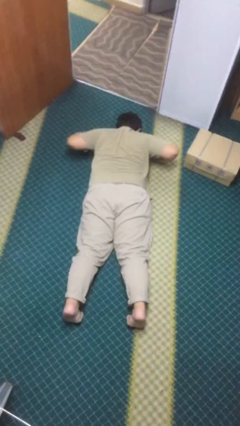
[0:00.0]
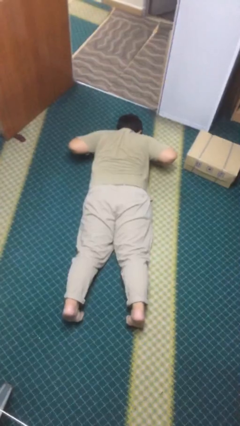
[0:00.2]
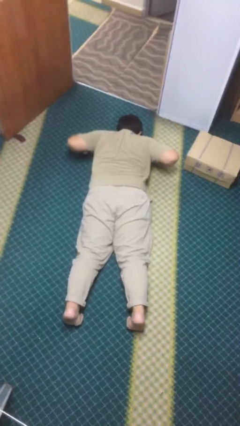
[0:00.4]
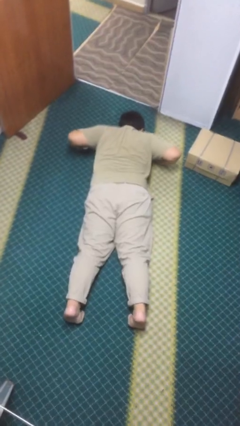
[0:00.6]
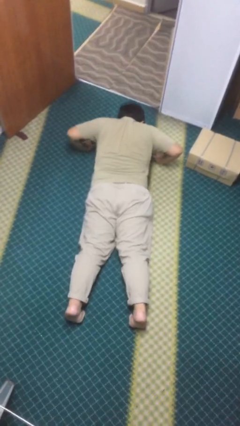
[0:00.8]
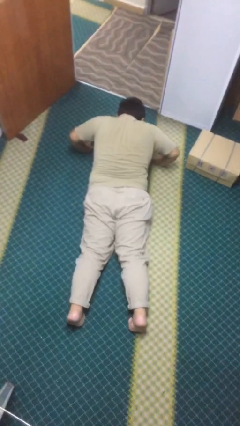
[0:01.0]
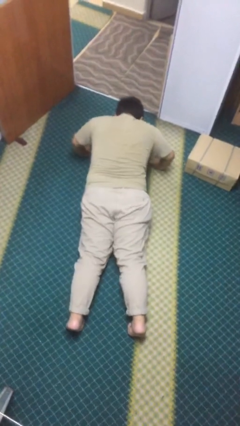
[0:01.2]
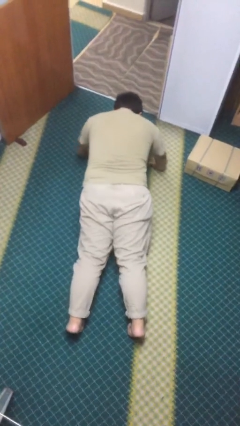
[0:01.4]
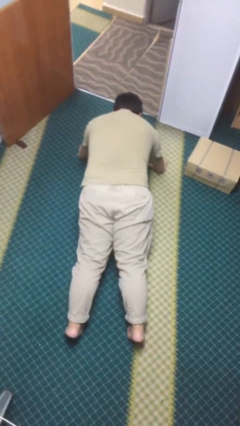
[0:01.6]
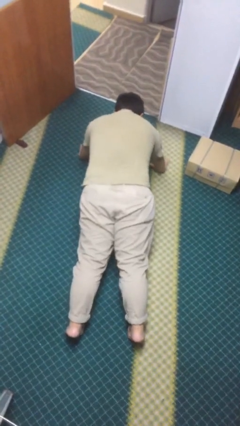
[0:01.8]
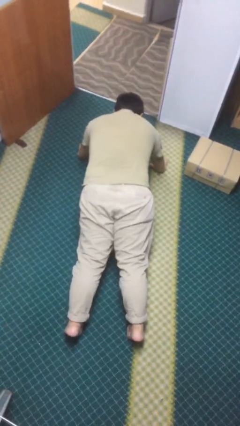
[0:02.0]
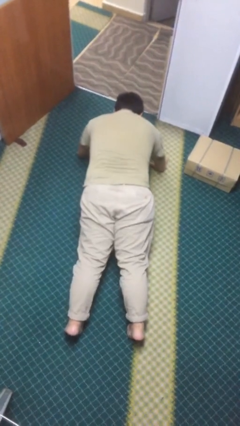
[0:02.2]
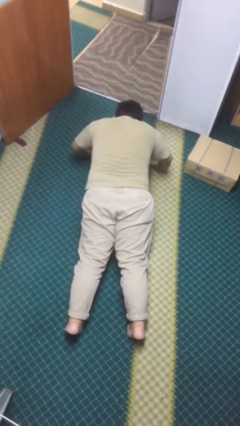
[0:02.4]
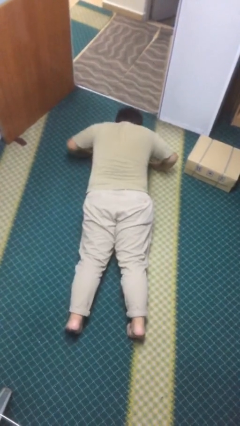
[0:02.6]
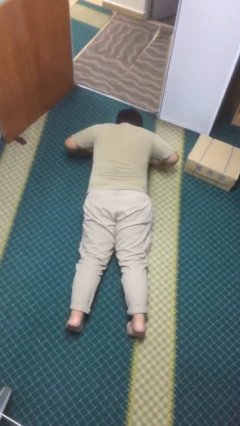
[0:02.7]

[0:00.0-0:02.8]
person exercises with pushup

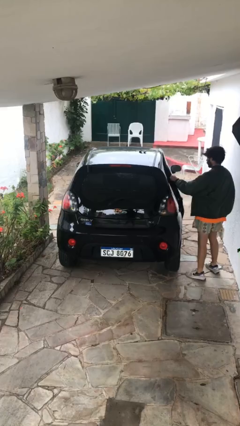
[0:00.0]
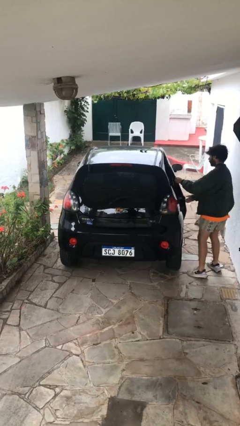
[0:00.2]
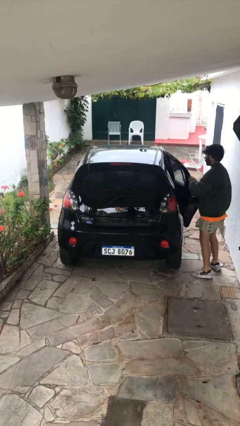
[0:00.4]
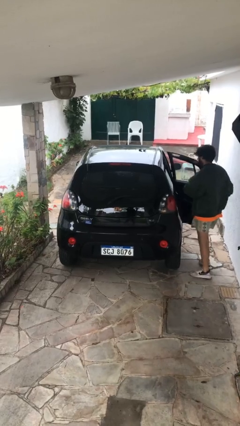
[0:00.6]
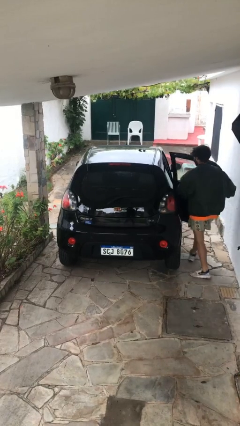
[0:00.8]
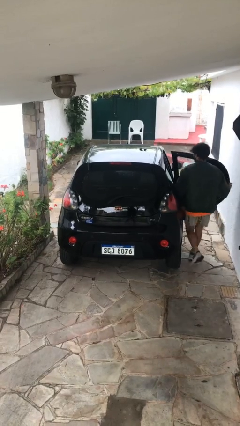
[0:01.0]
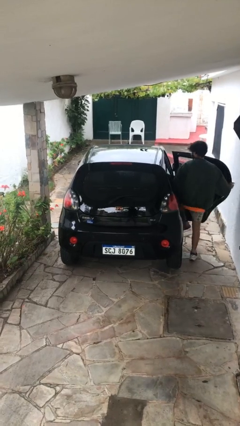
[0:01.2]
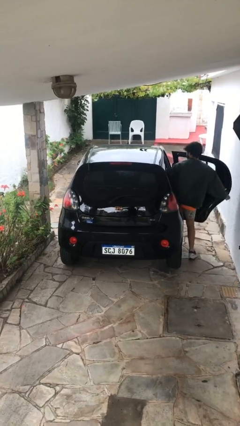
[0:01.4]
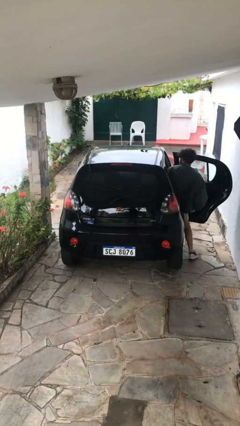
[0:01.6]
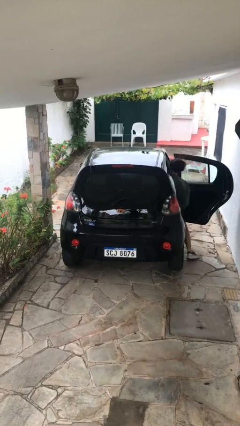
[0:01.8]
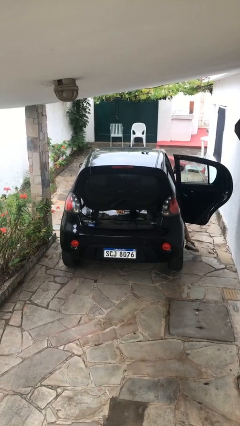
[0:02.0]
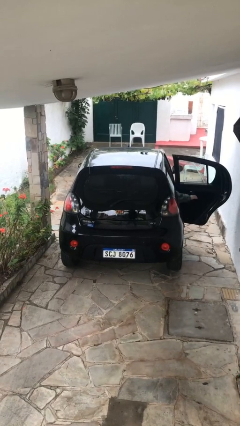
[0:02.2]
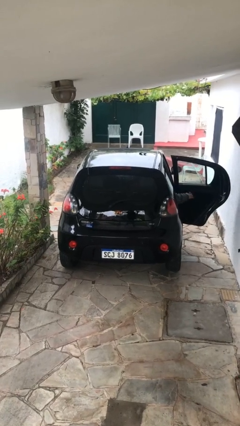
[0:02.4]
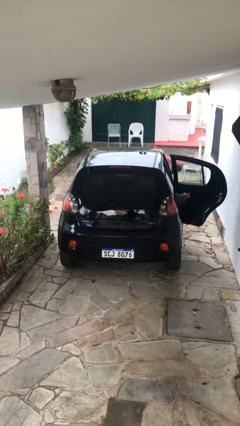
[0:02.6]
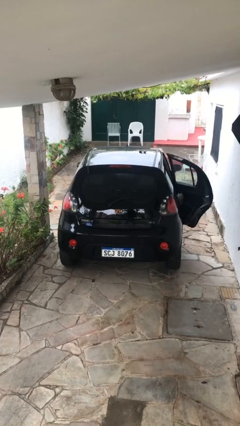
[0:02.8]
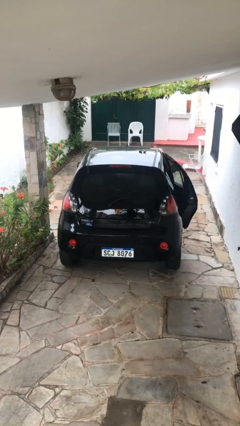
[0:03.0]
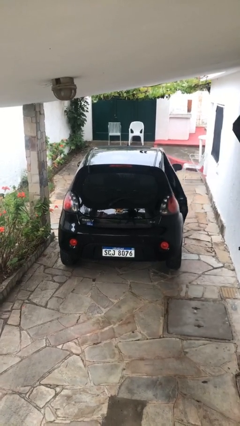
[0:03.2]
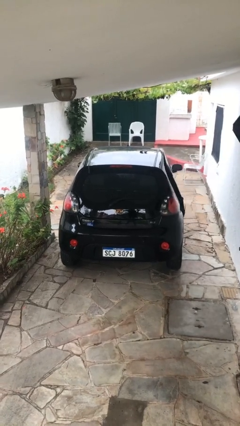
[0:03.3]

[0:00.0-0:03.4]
car picks up person

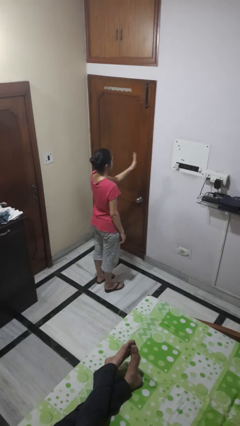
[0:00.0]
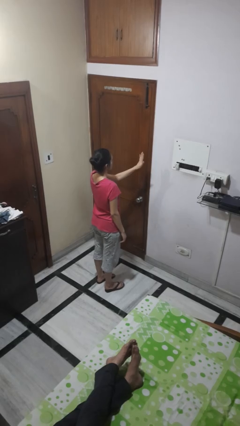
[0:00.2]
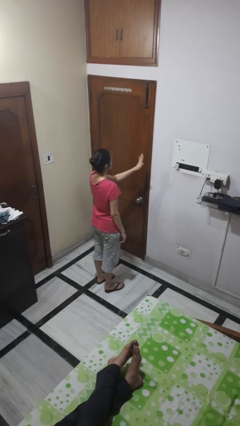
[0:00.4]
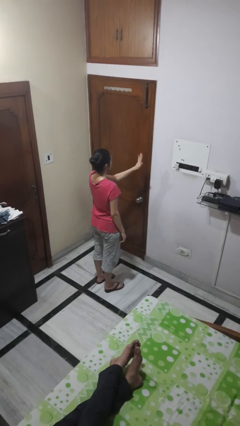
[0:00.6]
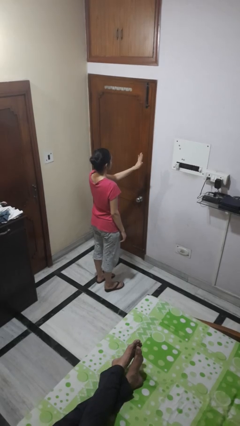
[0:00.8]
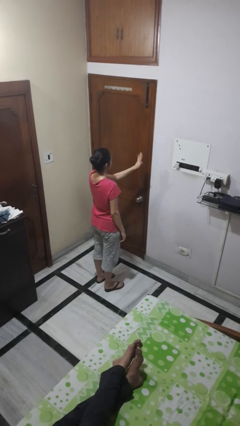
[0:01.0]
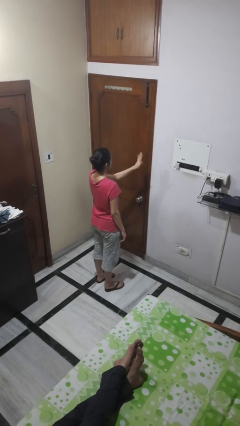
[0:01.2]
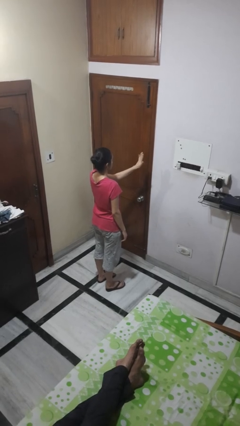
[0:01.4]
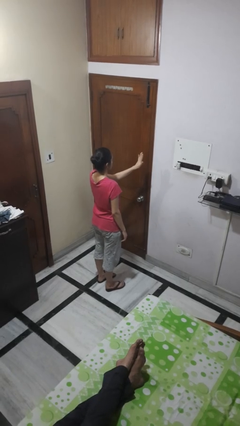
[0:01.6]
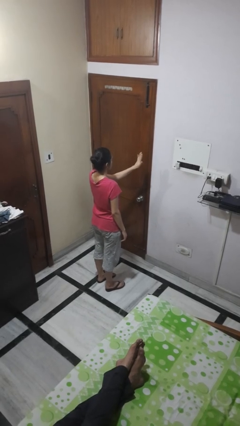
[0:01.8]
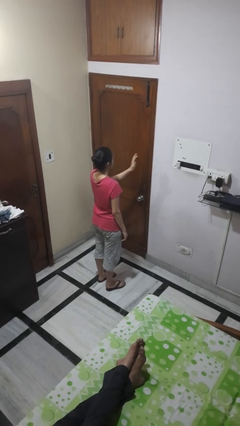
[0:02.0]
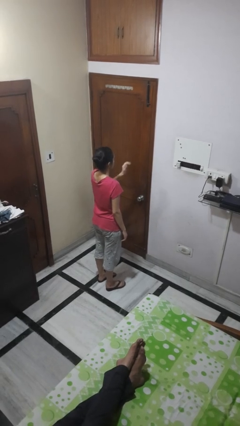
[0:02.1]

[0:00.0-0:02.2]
person gestures stop

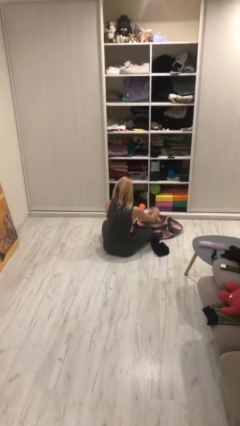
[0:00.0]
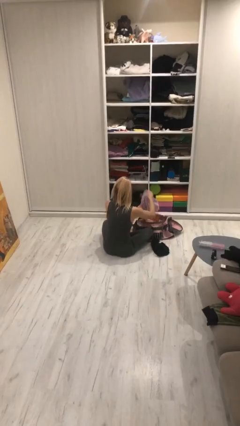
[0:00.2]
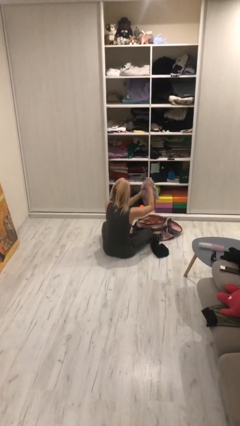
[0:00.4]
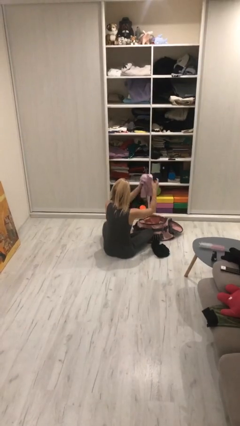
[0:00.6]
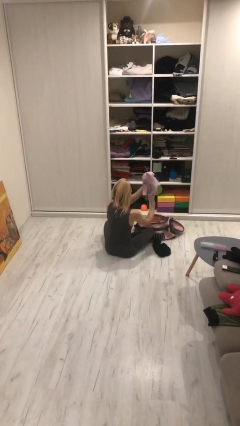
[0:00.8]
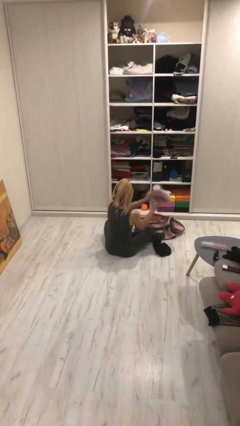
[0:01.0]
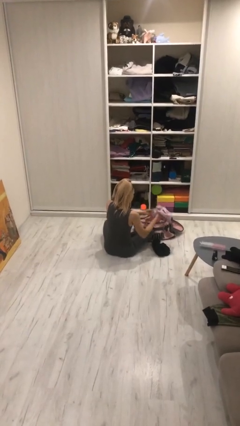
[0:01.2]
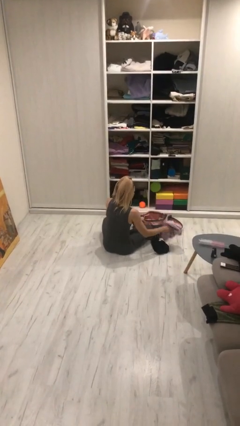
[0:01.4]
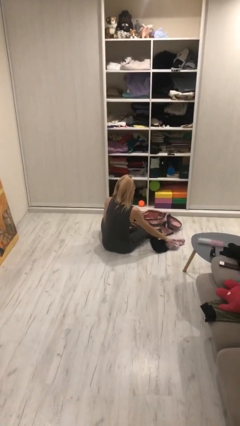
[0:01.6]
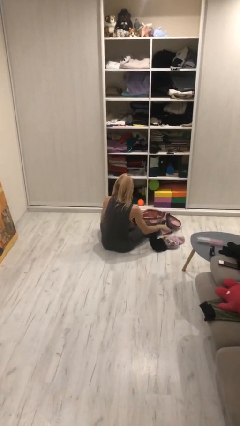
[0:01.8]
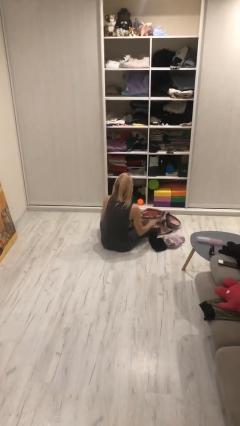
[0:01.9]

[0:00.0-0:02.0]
person unloads clothes from suitcase

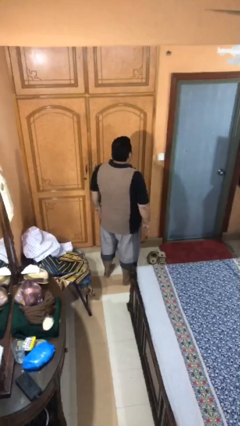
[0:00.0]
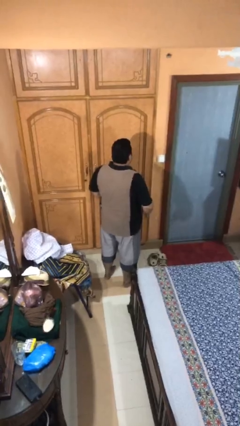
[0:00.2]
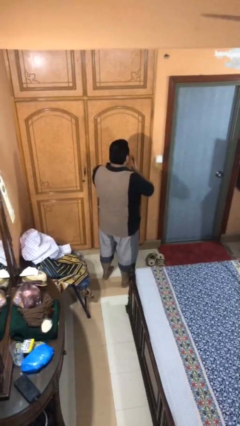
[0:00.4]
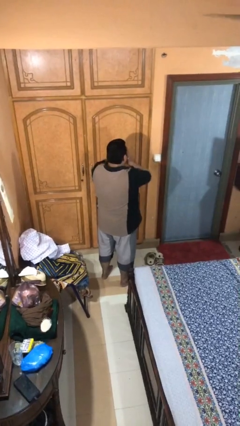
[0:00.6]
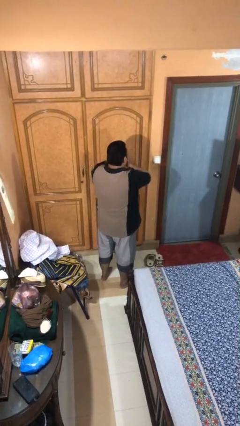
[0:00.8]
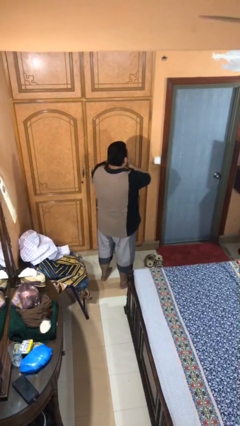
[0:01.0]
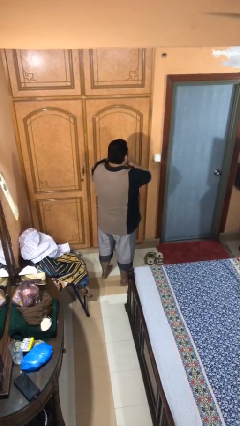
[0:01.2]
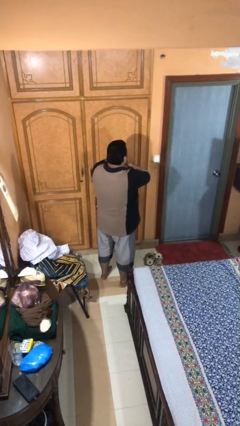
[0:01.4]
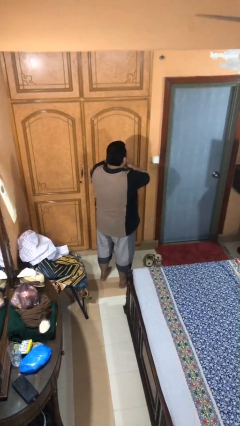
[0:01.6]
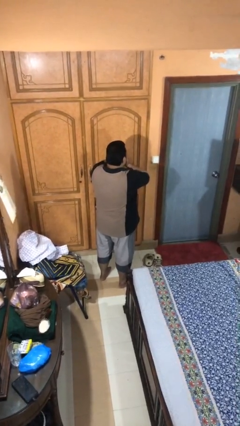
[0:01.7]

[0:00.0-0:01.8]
person covers face with hands

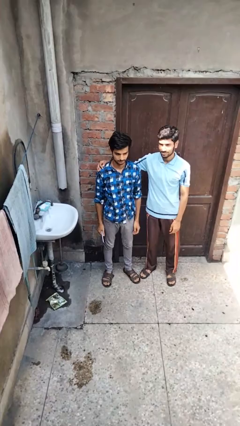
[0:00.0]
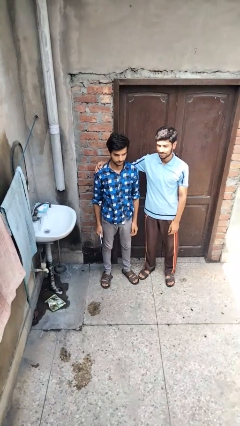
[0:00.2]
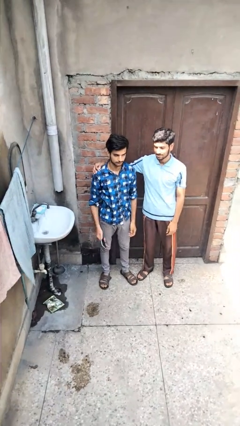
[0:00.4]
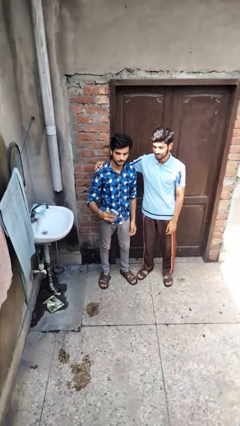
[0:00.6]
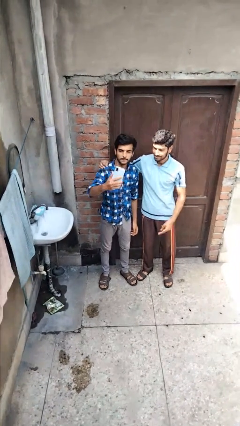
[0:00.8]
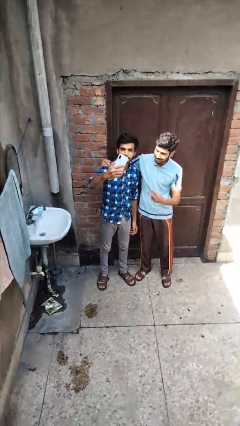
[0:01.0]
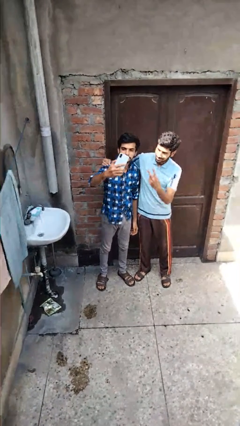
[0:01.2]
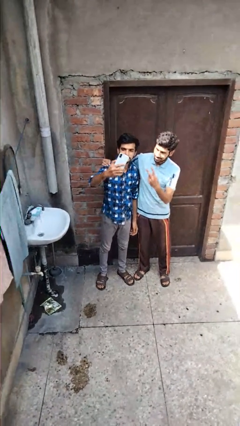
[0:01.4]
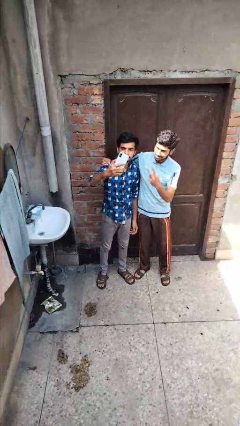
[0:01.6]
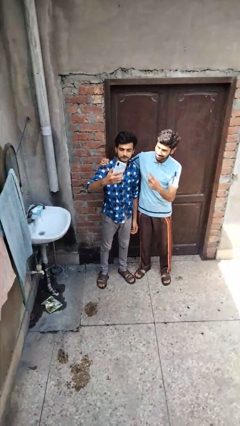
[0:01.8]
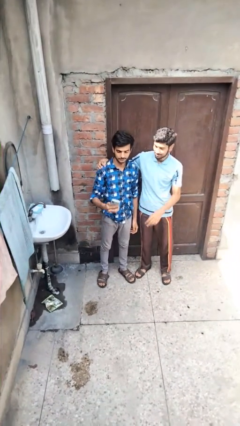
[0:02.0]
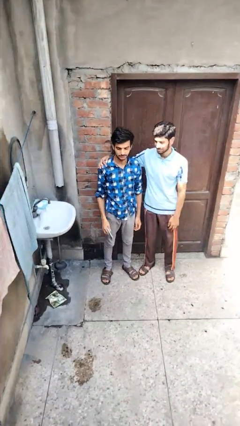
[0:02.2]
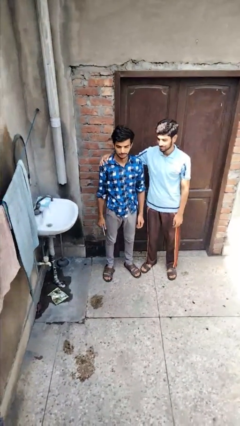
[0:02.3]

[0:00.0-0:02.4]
person takes selfie with person

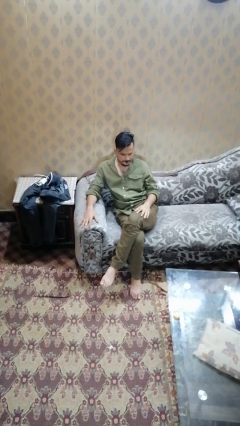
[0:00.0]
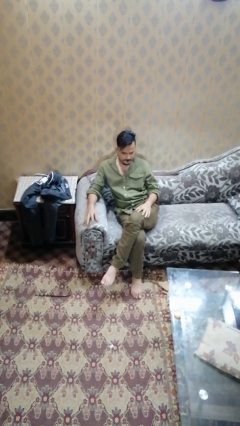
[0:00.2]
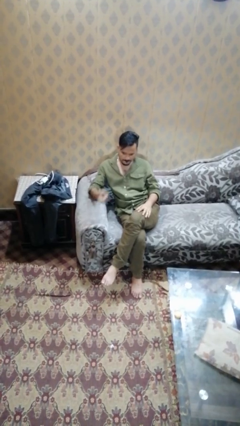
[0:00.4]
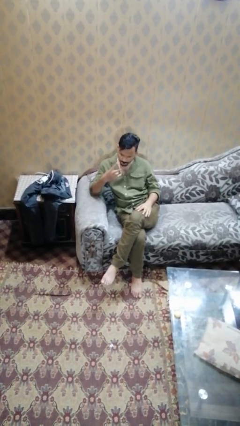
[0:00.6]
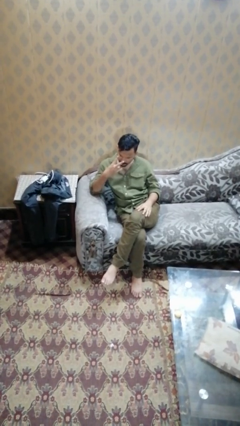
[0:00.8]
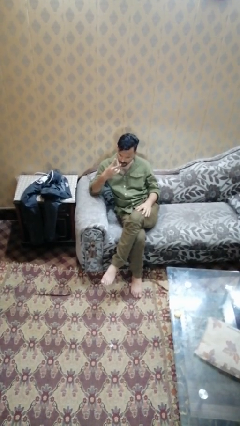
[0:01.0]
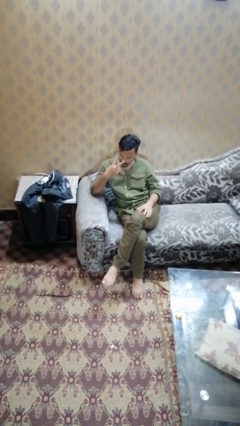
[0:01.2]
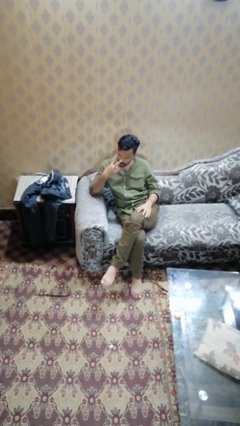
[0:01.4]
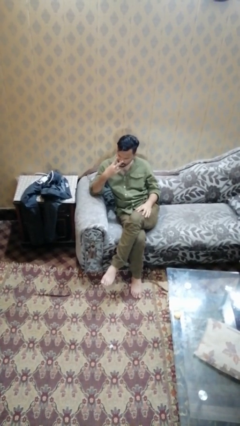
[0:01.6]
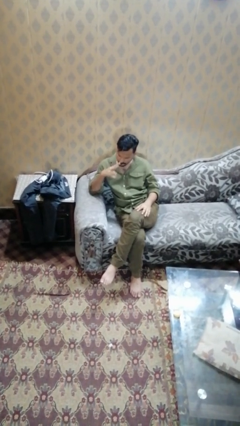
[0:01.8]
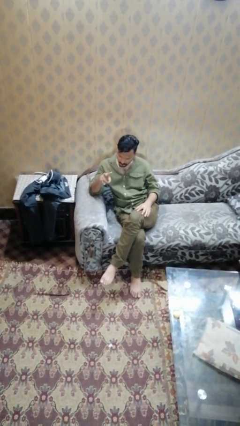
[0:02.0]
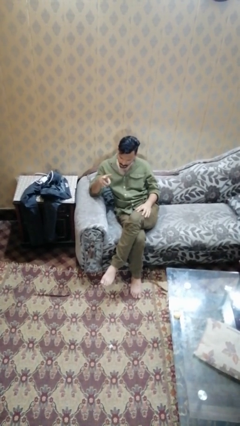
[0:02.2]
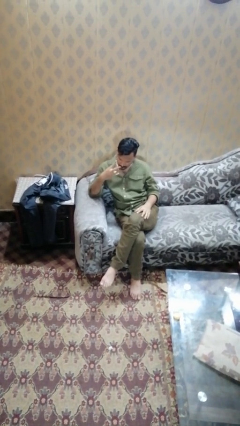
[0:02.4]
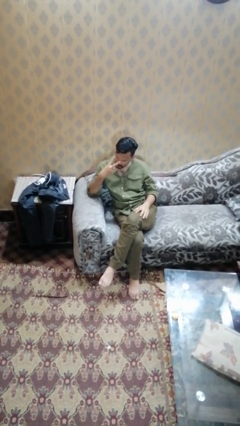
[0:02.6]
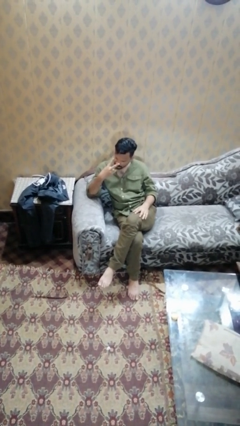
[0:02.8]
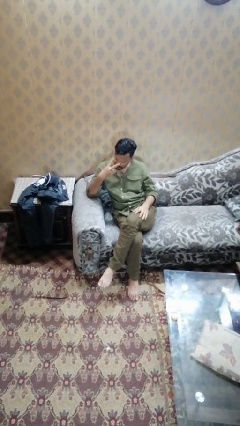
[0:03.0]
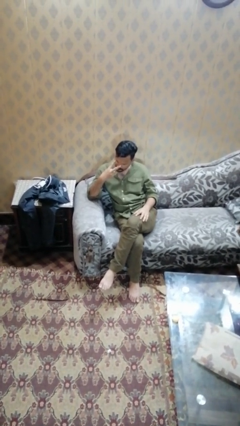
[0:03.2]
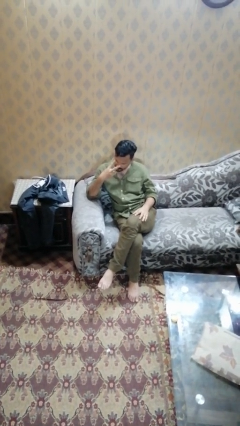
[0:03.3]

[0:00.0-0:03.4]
person gestures watch closely
